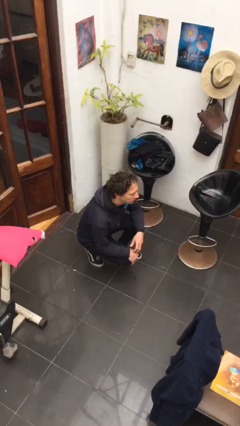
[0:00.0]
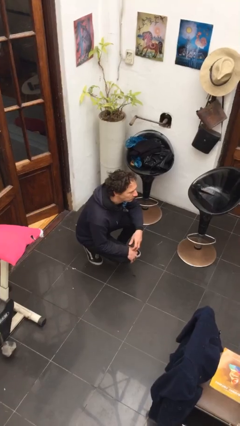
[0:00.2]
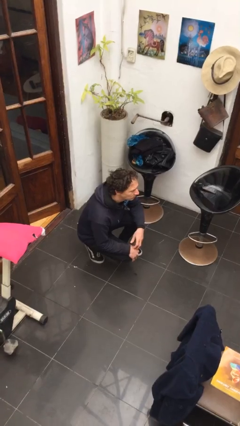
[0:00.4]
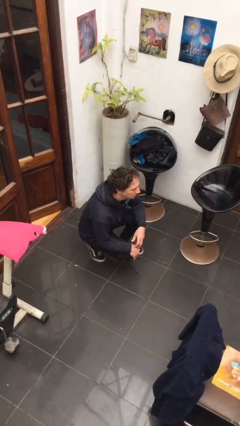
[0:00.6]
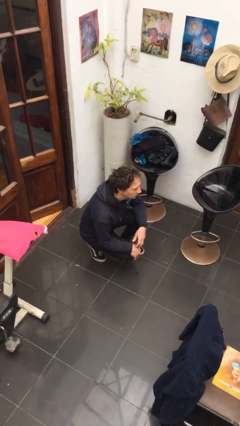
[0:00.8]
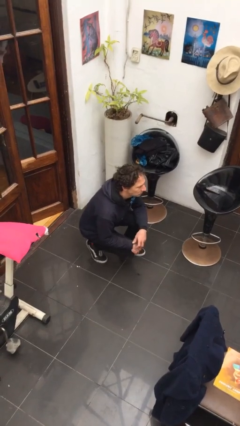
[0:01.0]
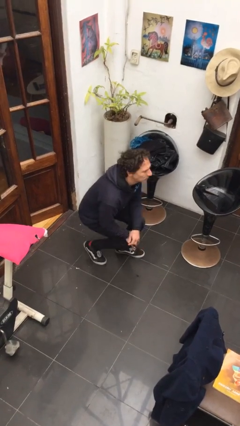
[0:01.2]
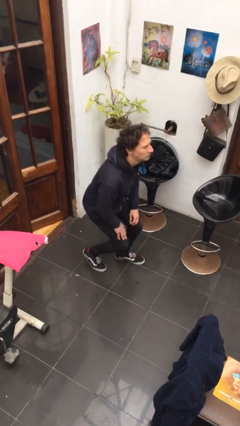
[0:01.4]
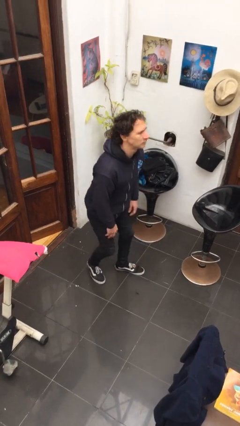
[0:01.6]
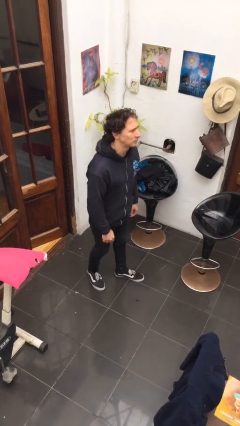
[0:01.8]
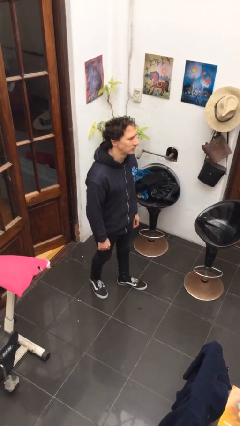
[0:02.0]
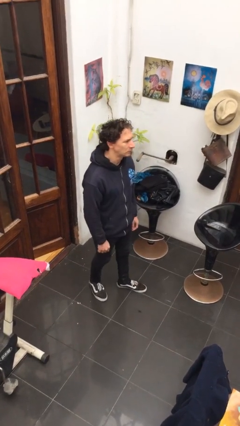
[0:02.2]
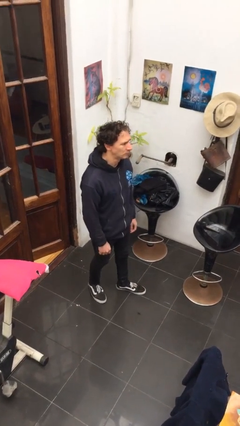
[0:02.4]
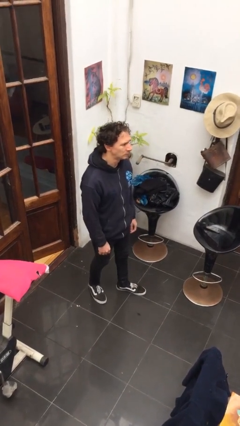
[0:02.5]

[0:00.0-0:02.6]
person stands up

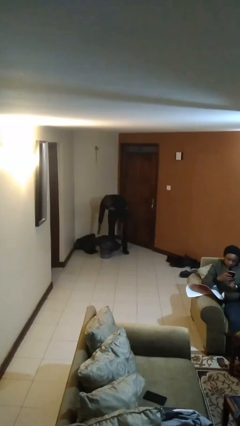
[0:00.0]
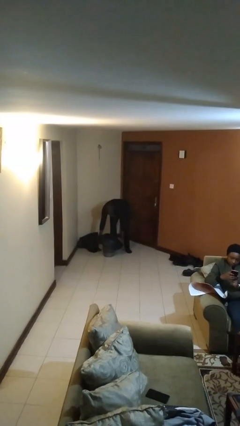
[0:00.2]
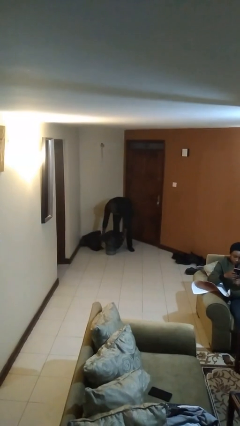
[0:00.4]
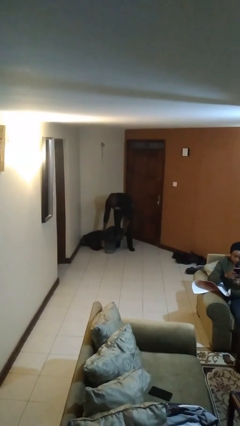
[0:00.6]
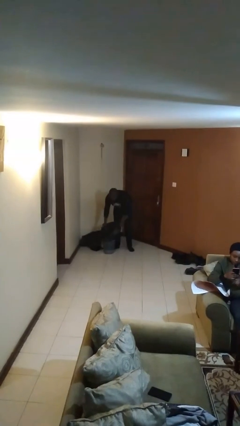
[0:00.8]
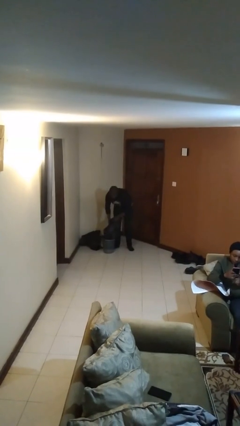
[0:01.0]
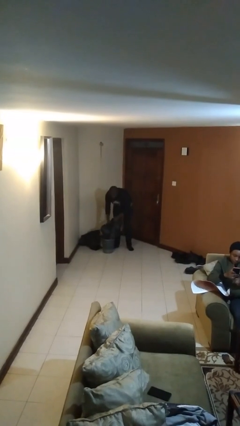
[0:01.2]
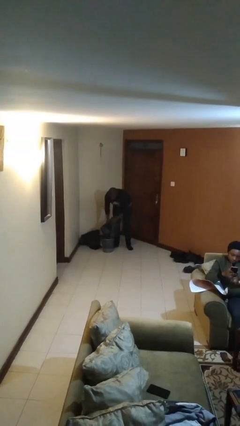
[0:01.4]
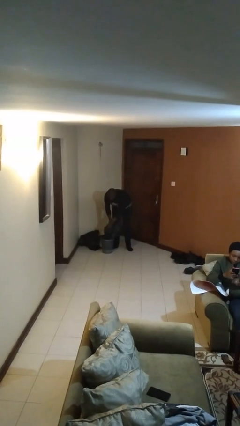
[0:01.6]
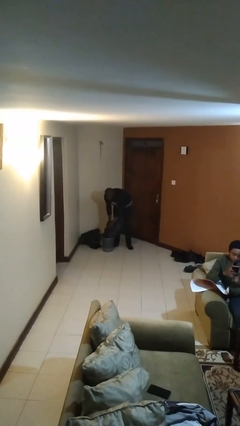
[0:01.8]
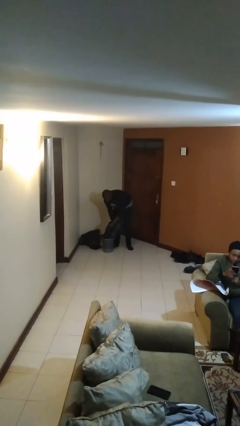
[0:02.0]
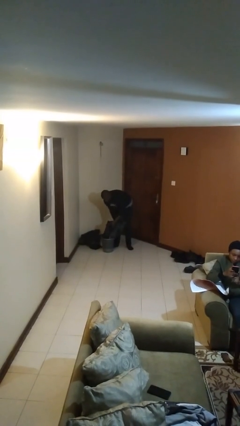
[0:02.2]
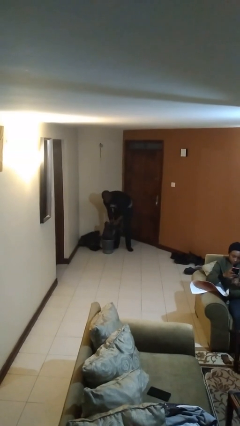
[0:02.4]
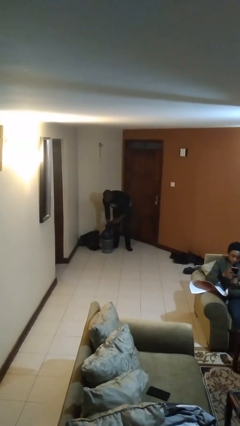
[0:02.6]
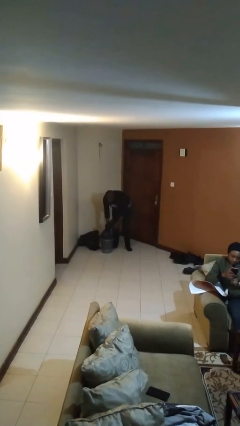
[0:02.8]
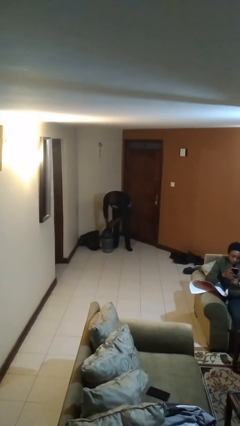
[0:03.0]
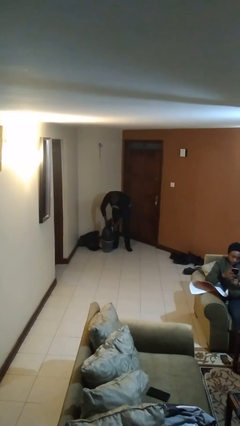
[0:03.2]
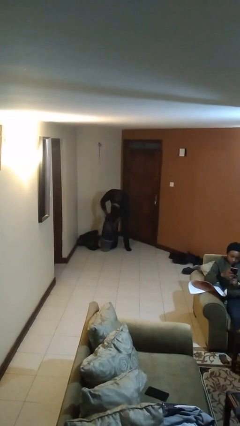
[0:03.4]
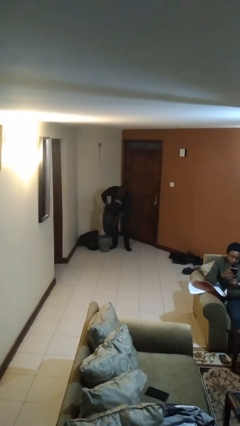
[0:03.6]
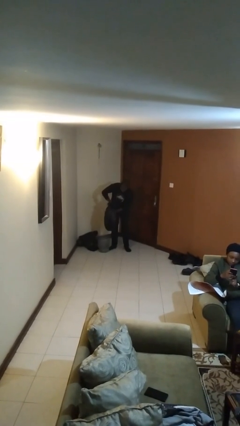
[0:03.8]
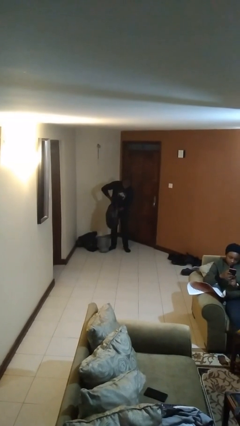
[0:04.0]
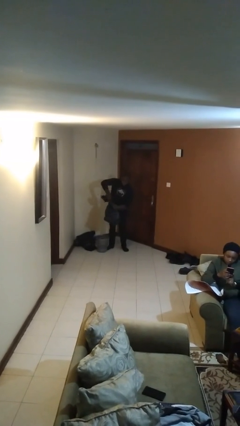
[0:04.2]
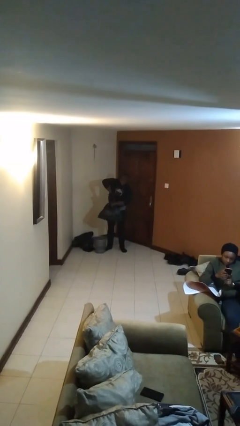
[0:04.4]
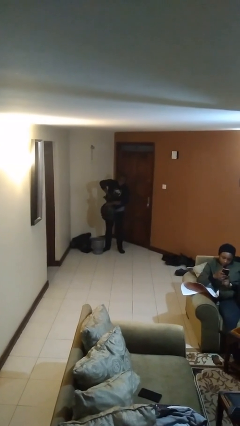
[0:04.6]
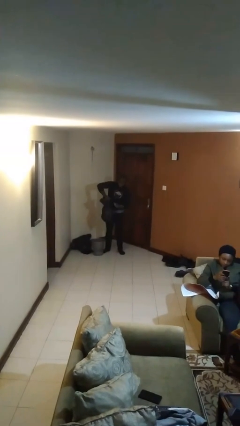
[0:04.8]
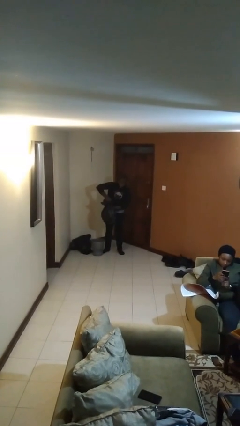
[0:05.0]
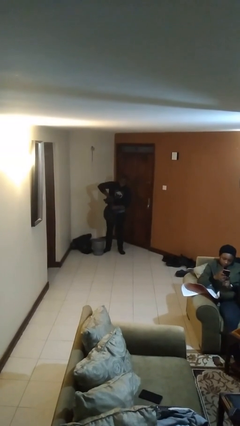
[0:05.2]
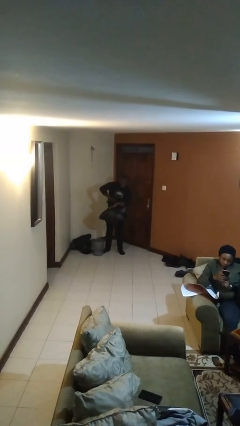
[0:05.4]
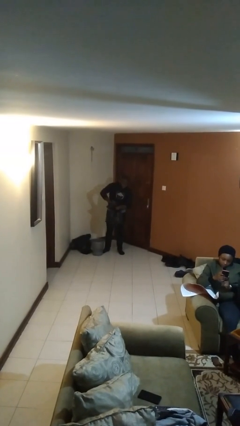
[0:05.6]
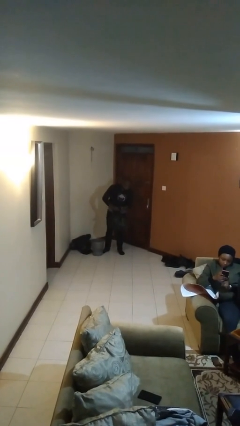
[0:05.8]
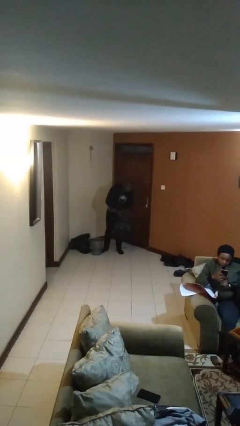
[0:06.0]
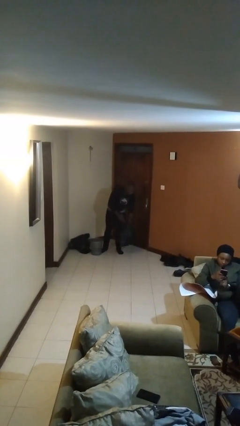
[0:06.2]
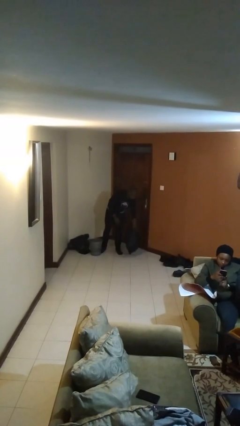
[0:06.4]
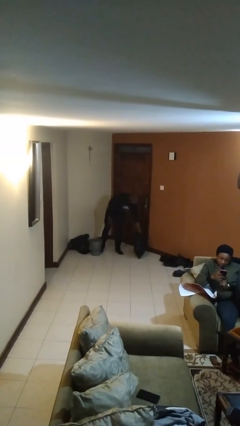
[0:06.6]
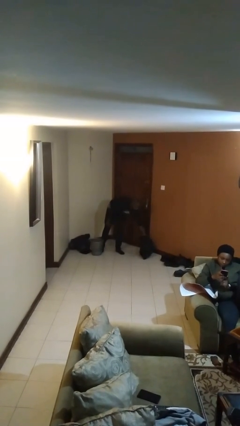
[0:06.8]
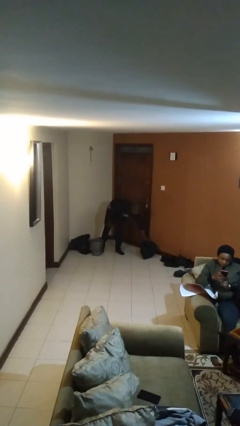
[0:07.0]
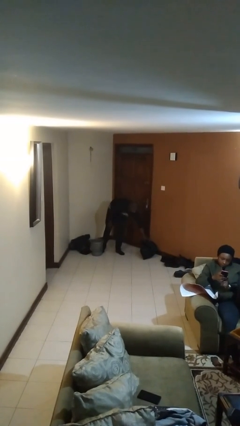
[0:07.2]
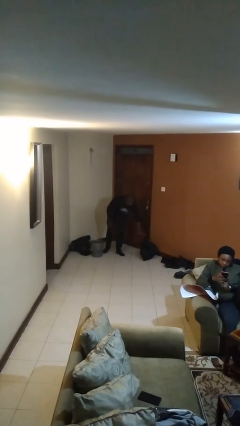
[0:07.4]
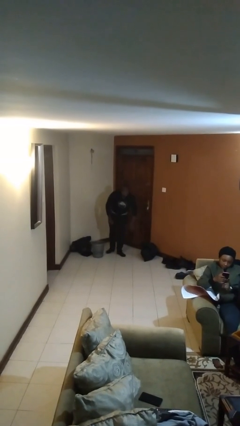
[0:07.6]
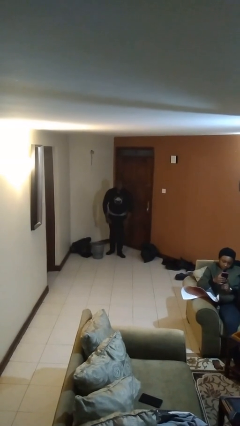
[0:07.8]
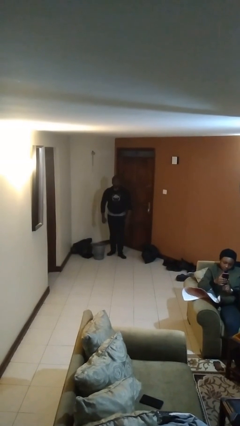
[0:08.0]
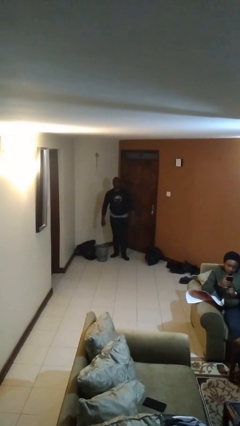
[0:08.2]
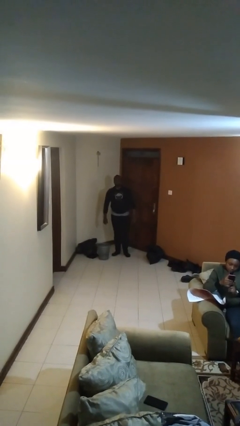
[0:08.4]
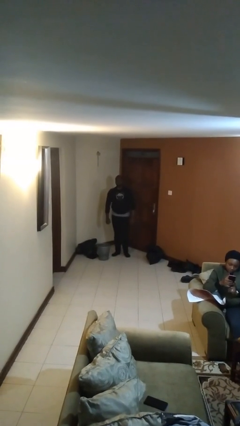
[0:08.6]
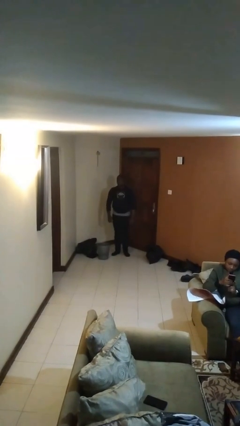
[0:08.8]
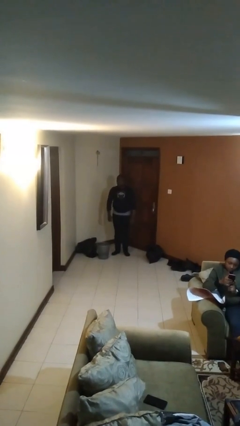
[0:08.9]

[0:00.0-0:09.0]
person removes trashbag from trashcan

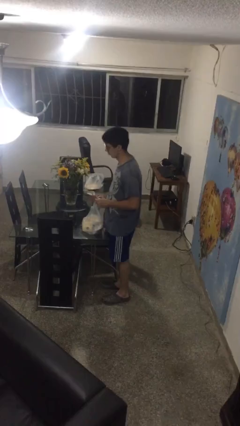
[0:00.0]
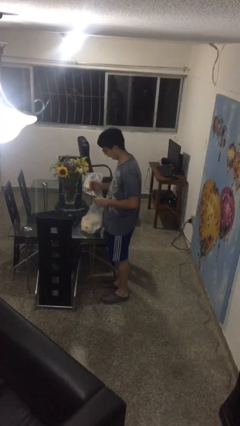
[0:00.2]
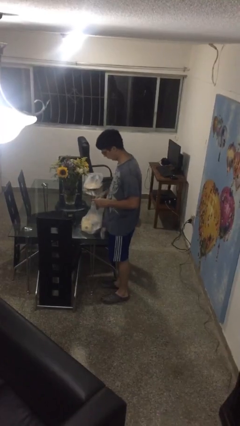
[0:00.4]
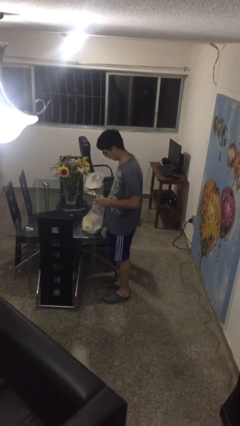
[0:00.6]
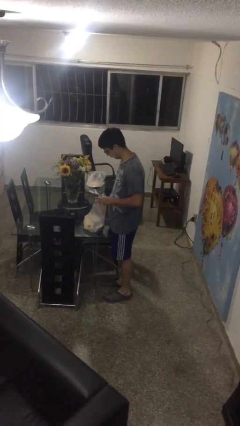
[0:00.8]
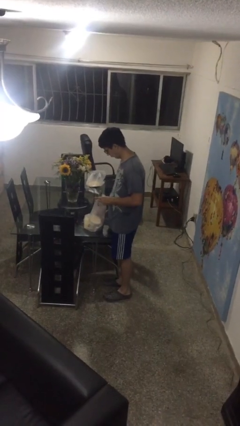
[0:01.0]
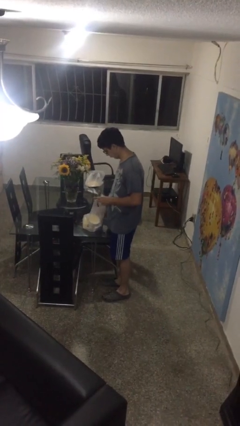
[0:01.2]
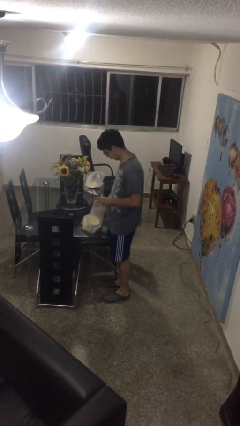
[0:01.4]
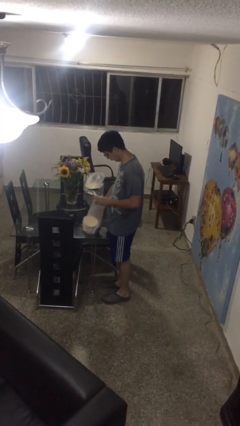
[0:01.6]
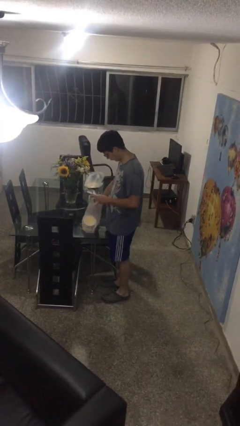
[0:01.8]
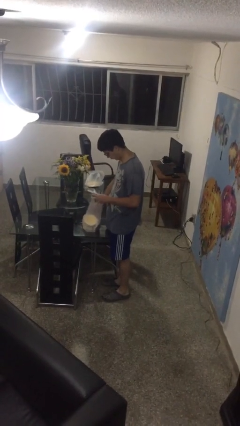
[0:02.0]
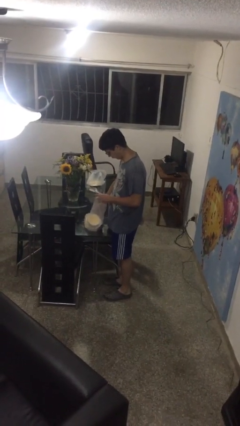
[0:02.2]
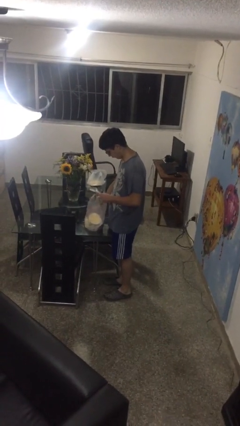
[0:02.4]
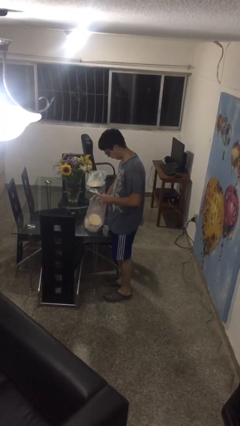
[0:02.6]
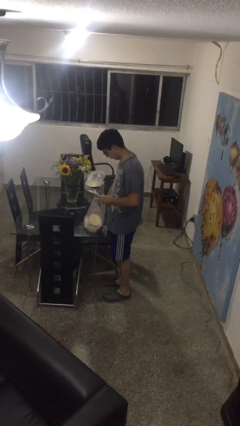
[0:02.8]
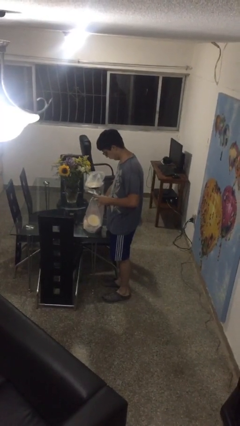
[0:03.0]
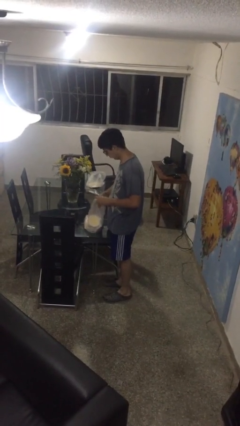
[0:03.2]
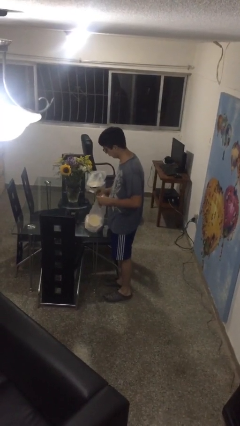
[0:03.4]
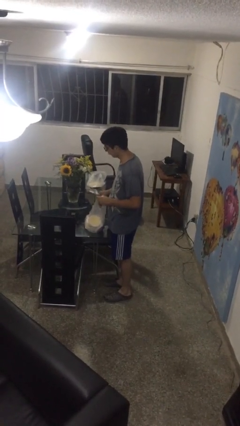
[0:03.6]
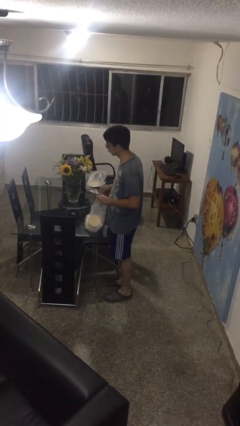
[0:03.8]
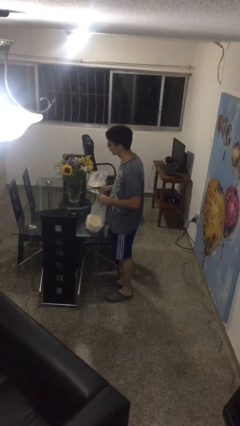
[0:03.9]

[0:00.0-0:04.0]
person searches in bag

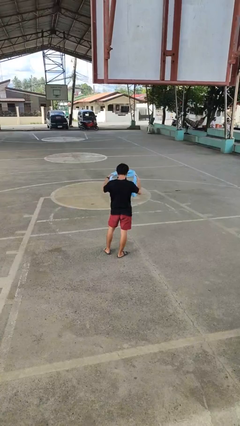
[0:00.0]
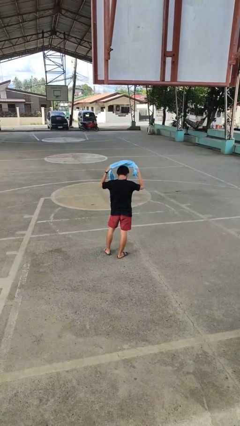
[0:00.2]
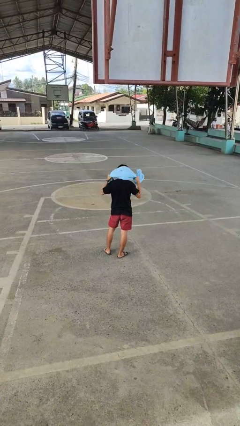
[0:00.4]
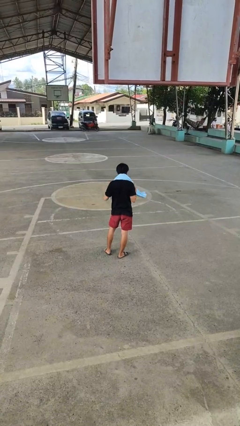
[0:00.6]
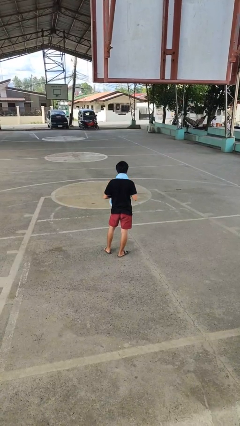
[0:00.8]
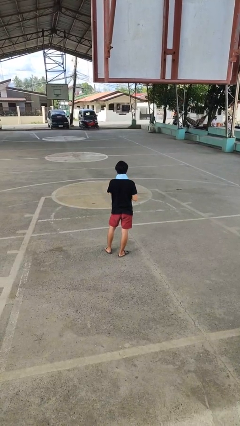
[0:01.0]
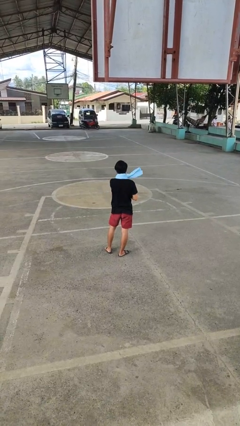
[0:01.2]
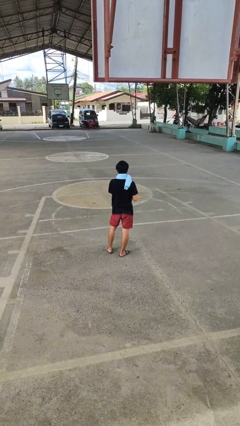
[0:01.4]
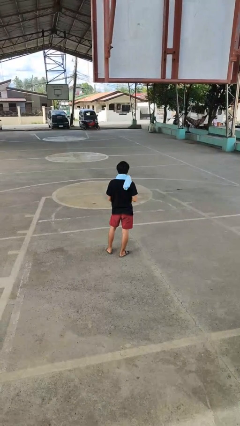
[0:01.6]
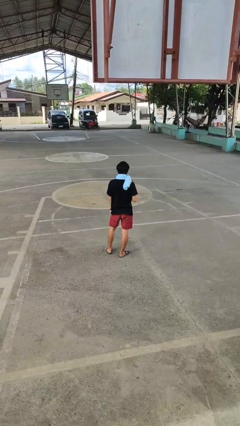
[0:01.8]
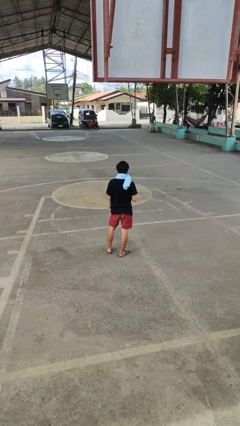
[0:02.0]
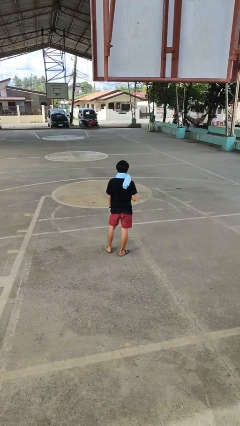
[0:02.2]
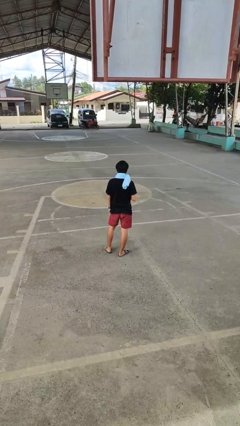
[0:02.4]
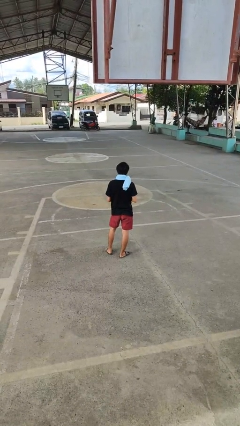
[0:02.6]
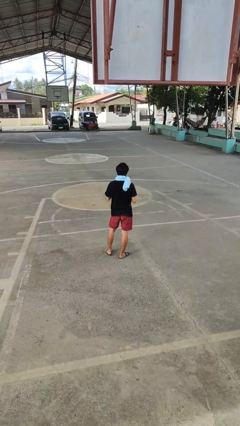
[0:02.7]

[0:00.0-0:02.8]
person puts on scarf

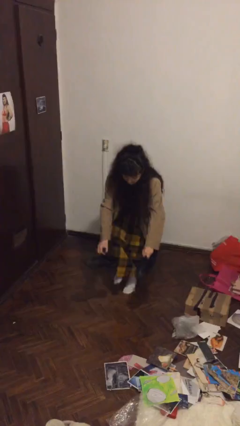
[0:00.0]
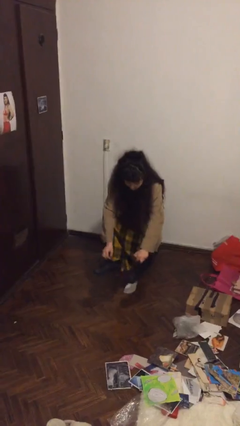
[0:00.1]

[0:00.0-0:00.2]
person puts on shoes
